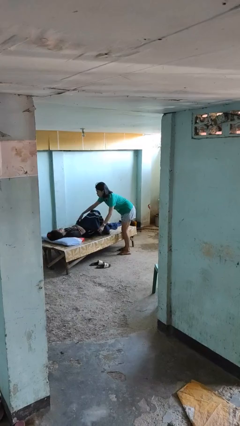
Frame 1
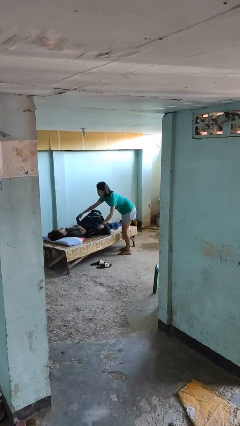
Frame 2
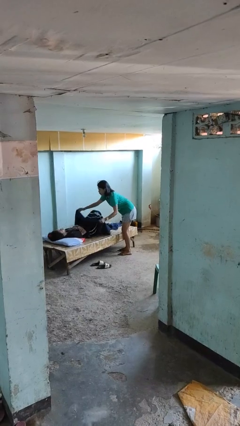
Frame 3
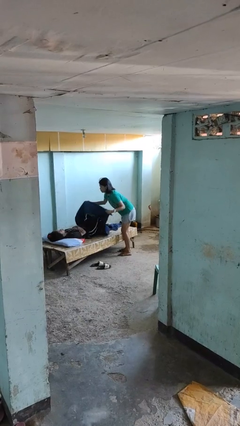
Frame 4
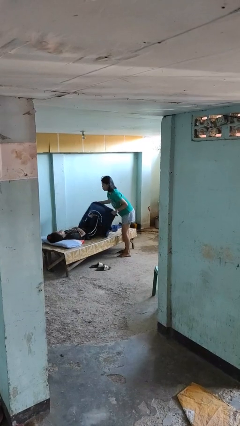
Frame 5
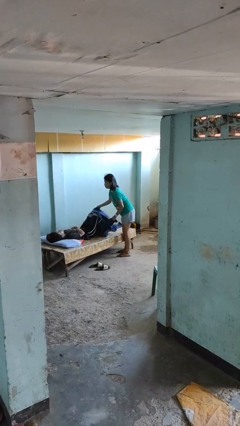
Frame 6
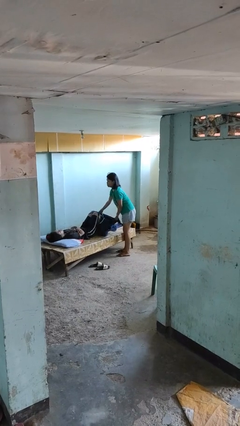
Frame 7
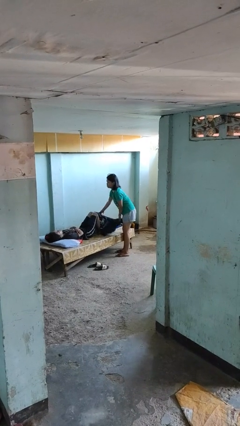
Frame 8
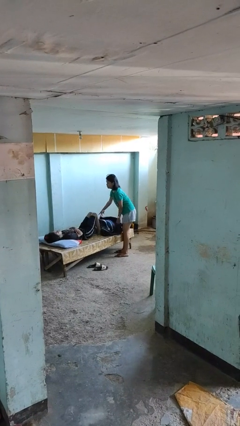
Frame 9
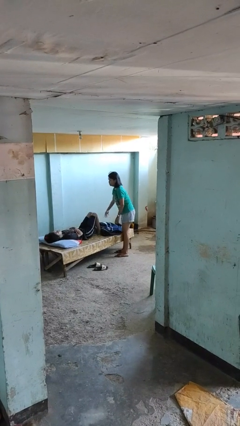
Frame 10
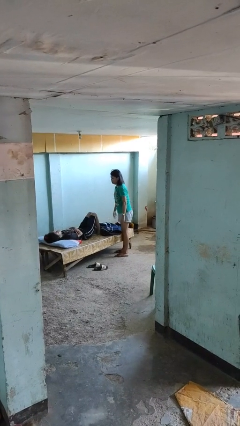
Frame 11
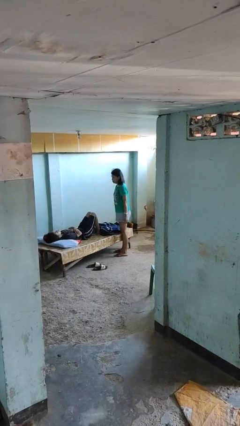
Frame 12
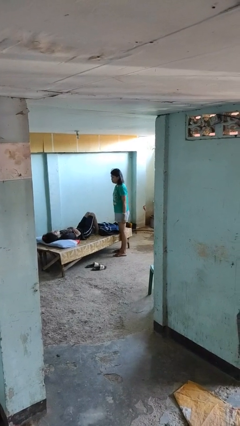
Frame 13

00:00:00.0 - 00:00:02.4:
person uncovers friend with blanket

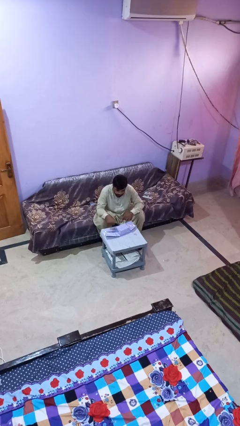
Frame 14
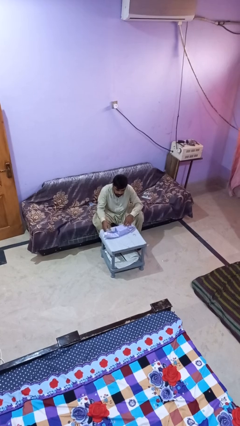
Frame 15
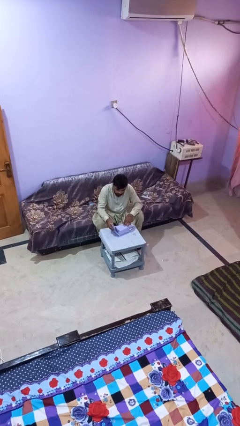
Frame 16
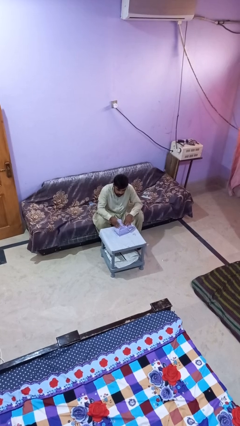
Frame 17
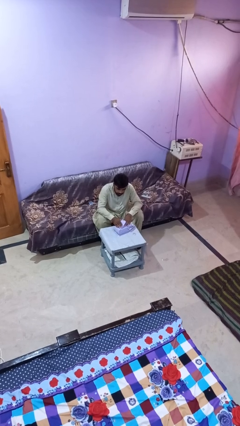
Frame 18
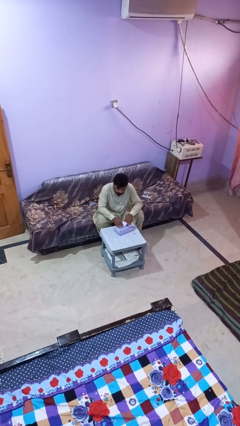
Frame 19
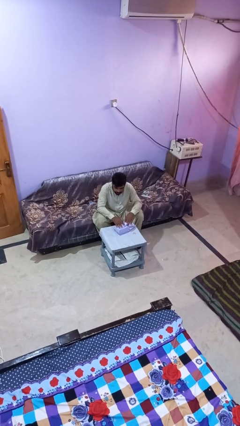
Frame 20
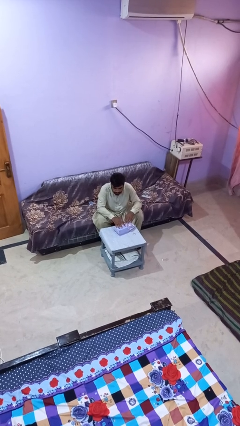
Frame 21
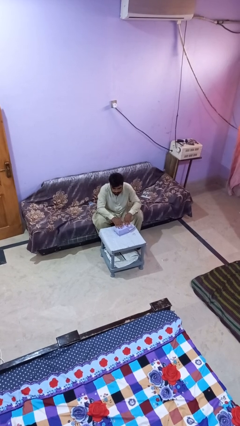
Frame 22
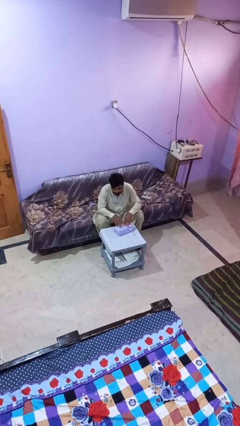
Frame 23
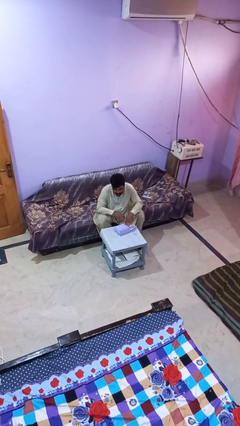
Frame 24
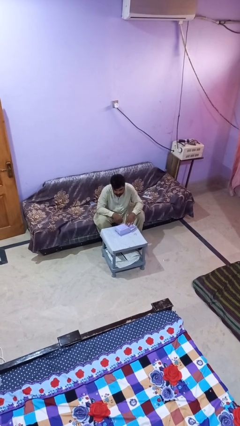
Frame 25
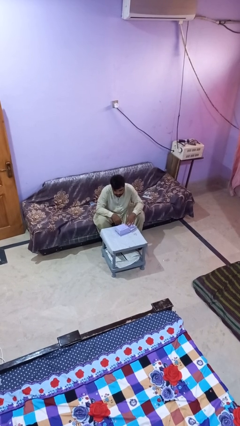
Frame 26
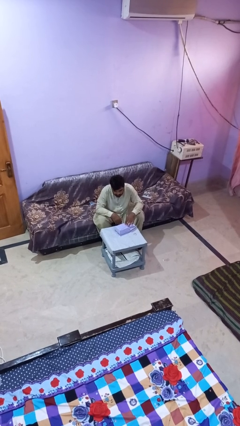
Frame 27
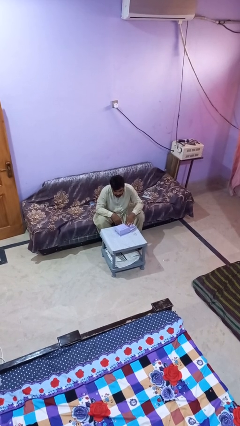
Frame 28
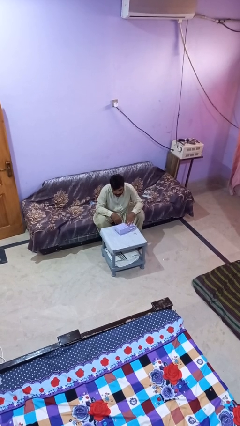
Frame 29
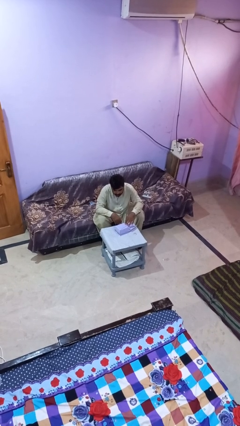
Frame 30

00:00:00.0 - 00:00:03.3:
person wraps box

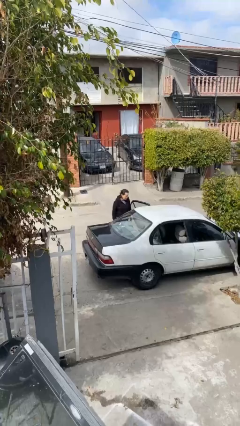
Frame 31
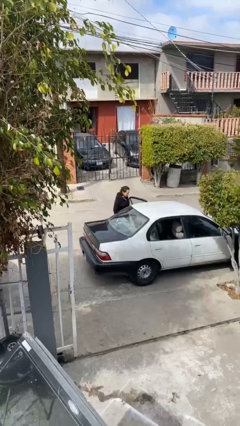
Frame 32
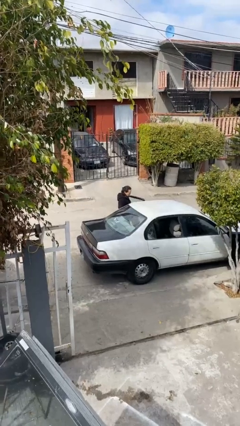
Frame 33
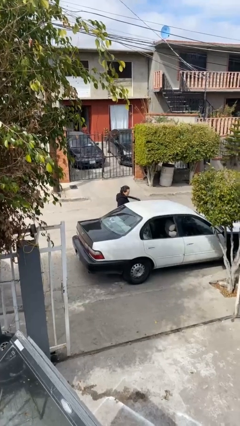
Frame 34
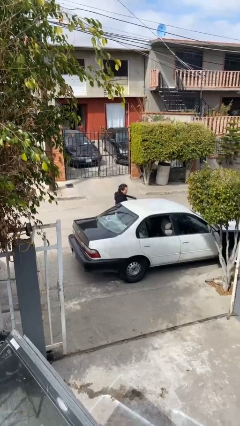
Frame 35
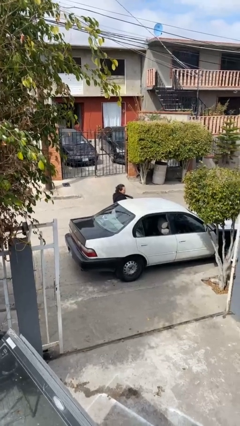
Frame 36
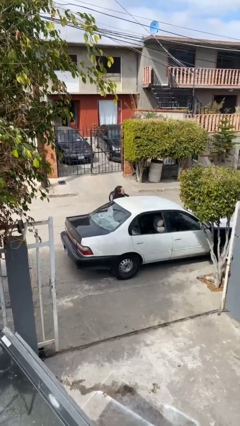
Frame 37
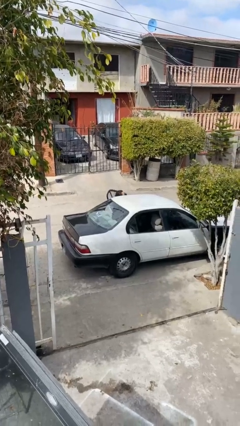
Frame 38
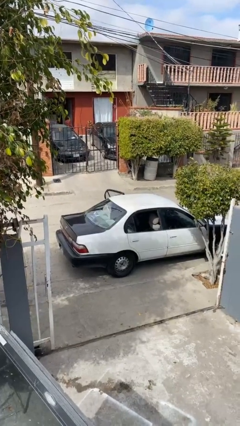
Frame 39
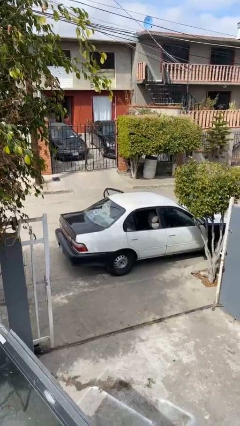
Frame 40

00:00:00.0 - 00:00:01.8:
person enters car

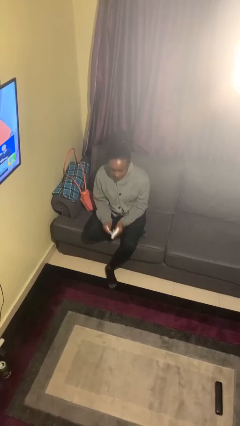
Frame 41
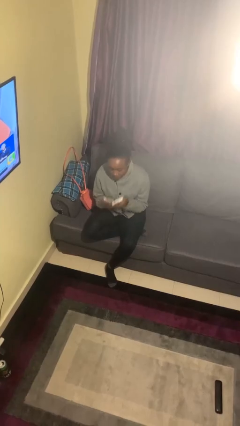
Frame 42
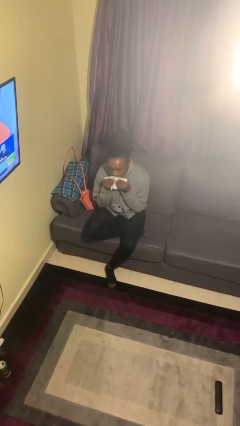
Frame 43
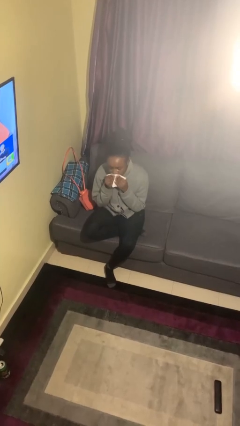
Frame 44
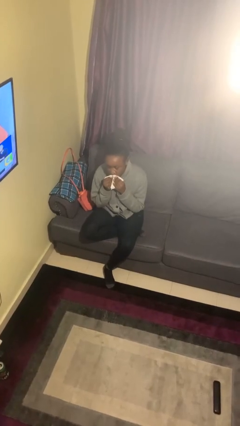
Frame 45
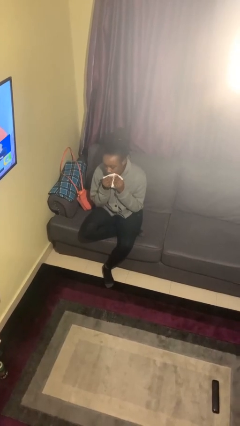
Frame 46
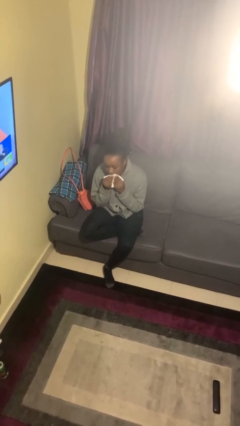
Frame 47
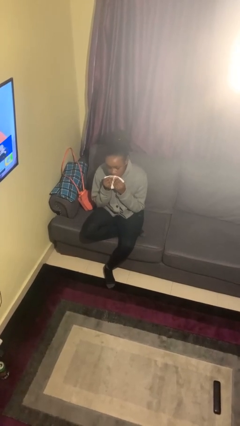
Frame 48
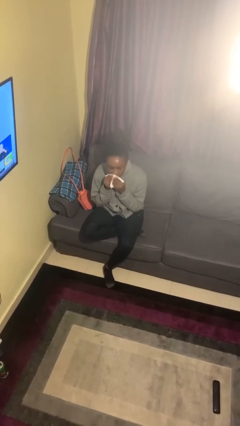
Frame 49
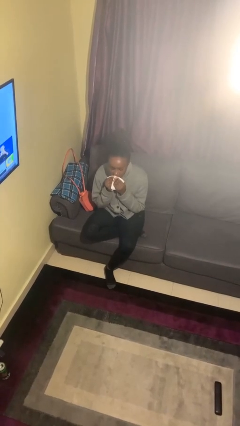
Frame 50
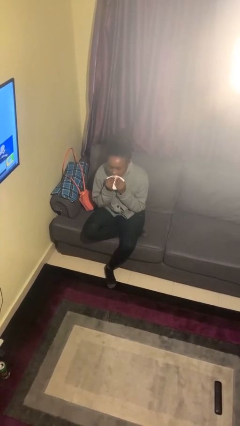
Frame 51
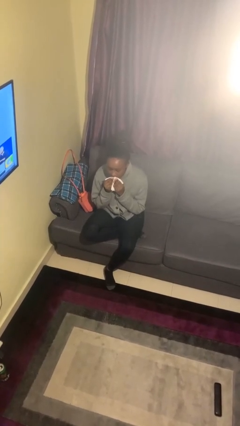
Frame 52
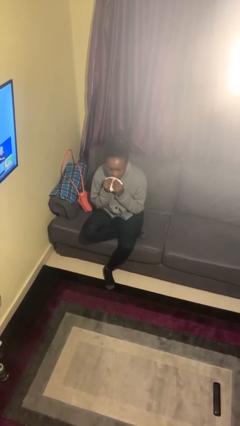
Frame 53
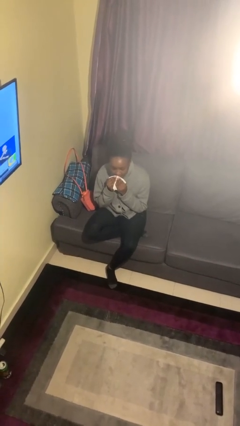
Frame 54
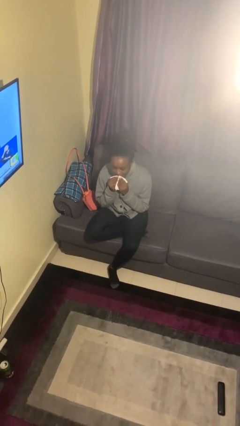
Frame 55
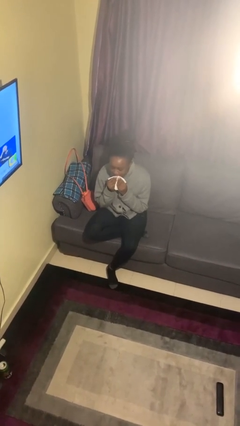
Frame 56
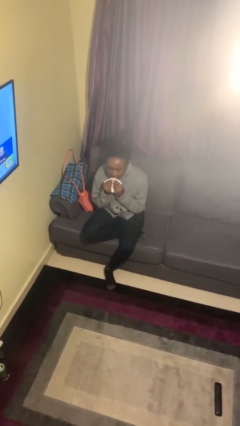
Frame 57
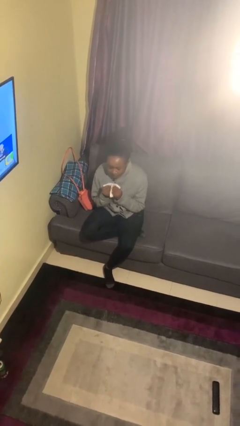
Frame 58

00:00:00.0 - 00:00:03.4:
person wipes mouth with napkin

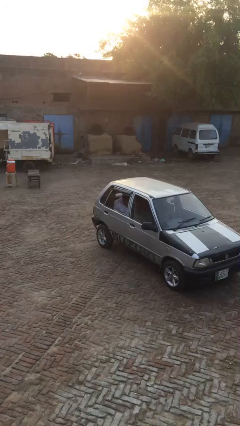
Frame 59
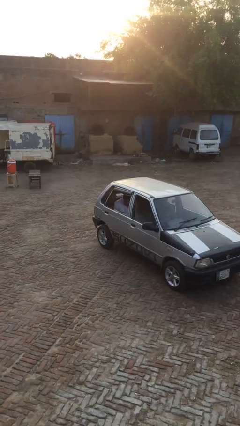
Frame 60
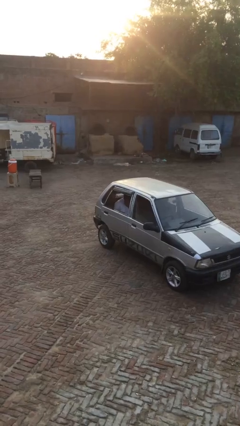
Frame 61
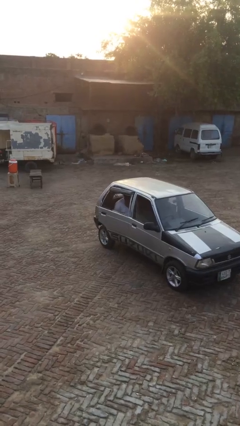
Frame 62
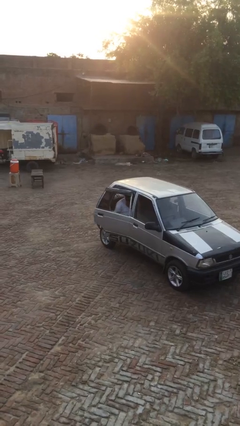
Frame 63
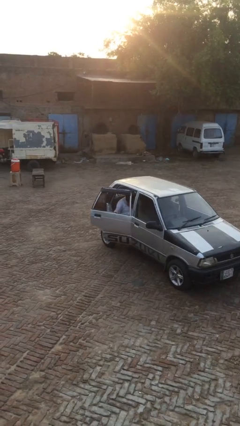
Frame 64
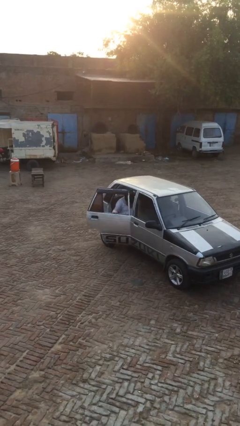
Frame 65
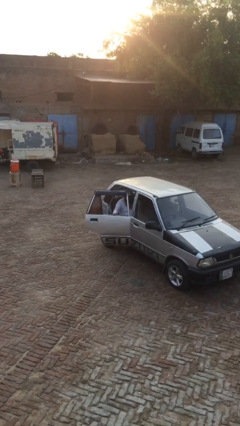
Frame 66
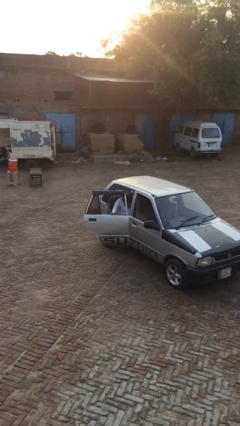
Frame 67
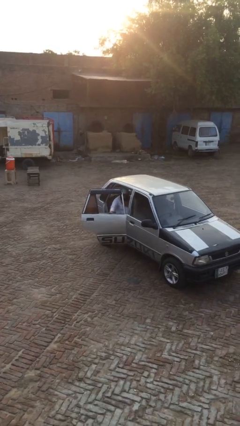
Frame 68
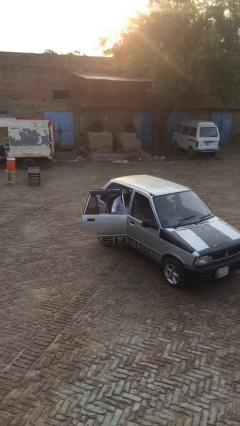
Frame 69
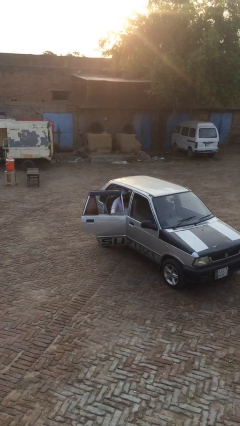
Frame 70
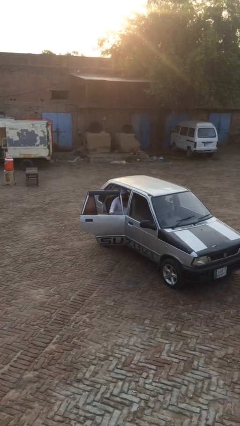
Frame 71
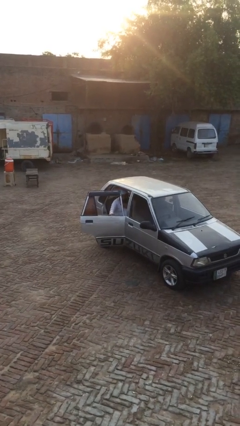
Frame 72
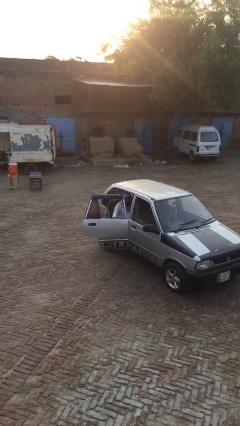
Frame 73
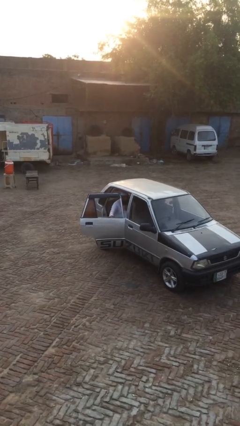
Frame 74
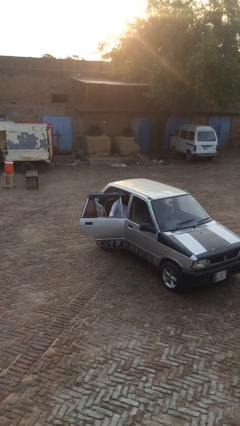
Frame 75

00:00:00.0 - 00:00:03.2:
person opens car door

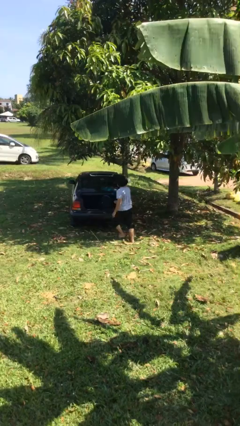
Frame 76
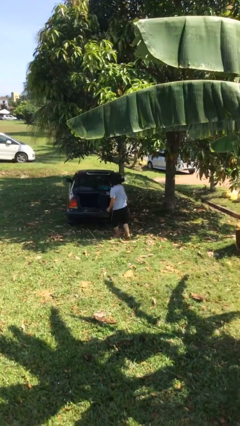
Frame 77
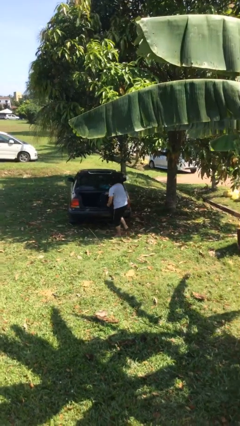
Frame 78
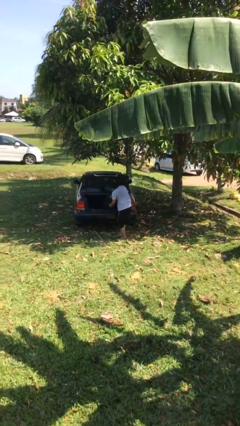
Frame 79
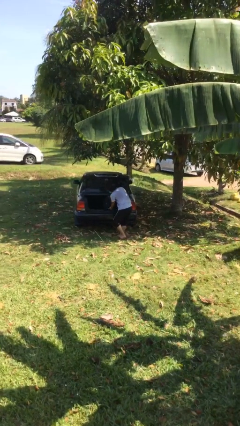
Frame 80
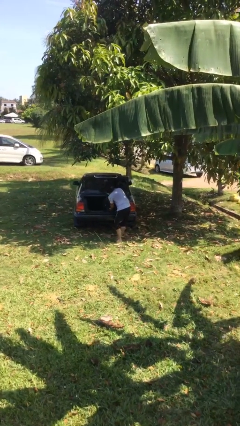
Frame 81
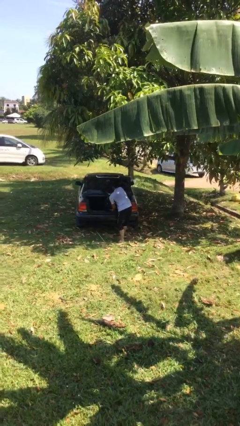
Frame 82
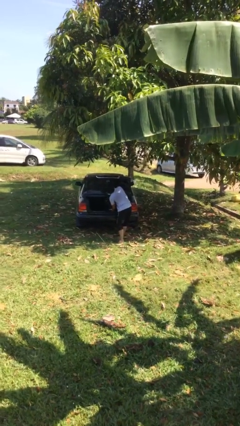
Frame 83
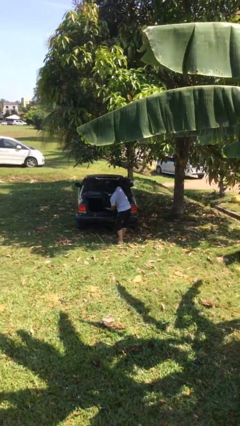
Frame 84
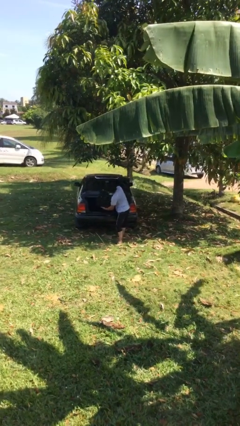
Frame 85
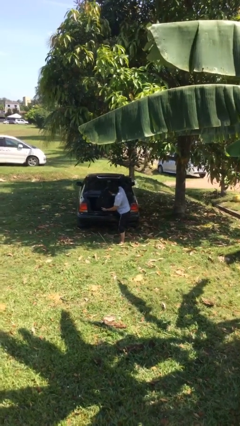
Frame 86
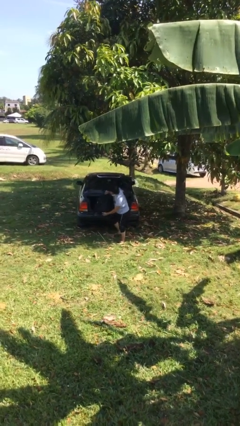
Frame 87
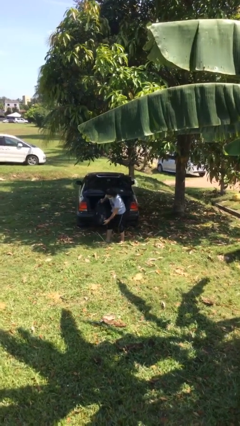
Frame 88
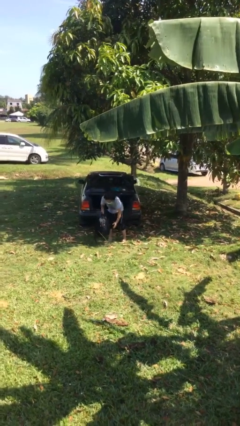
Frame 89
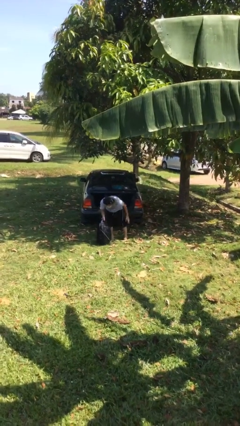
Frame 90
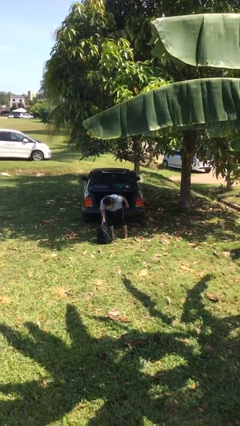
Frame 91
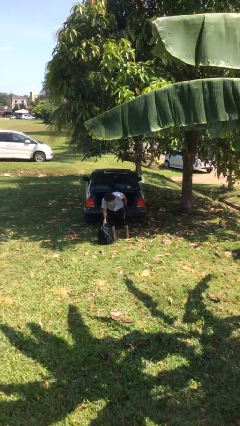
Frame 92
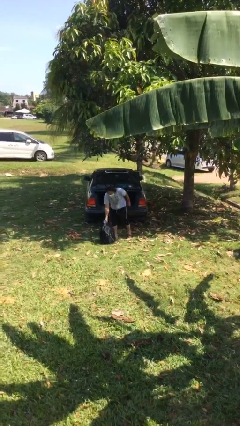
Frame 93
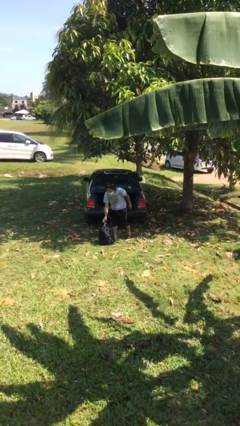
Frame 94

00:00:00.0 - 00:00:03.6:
person unloads car
